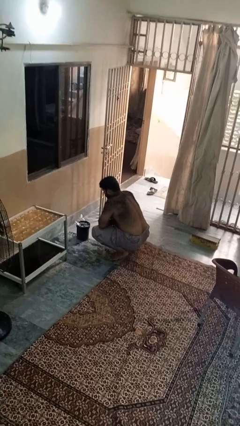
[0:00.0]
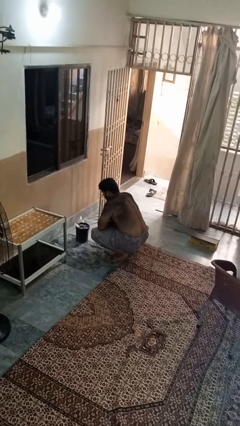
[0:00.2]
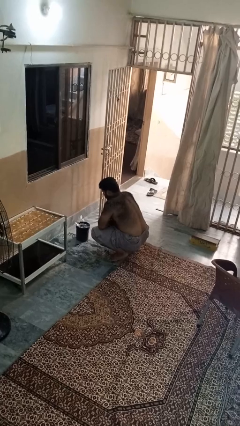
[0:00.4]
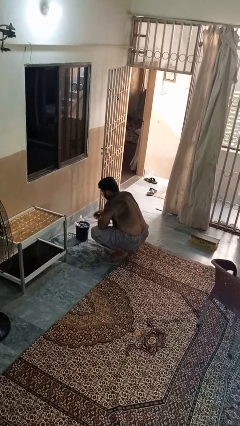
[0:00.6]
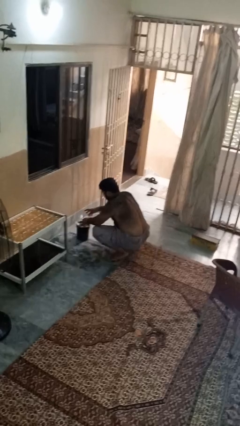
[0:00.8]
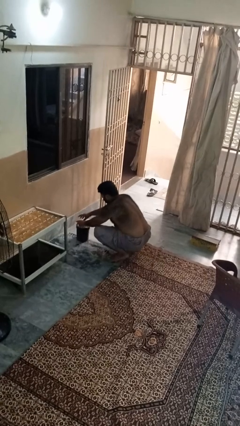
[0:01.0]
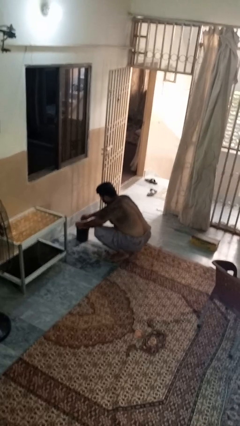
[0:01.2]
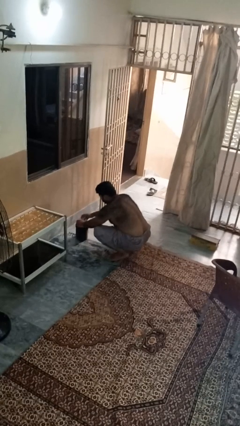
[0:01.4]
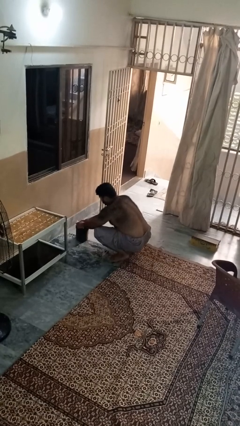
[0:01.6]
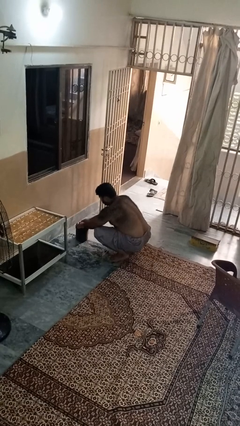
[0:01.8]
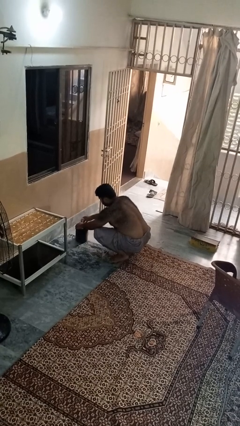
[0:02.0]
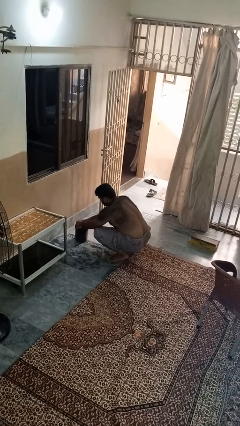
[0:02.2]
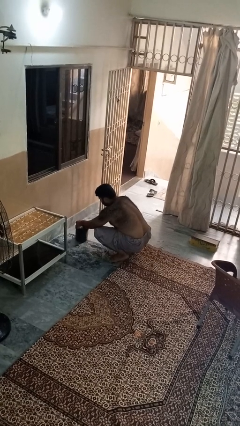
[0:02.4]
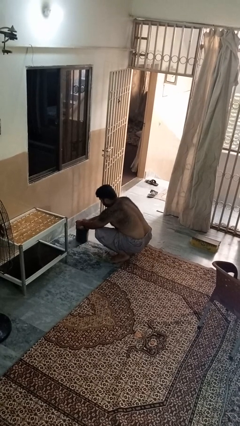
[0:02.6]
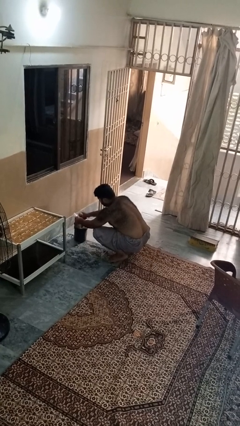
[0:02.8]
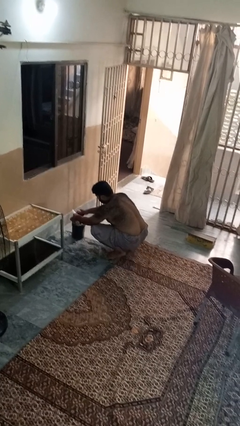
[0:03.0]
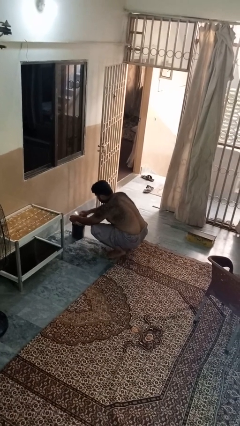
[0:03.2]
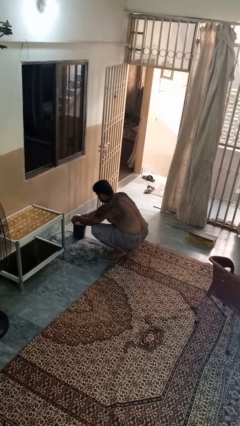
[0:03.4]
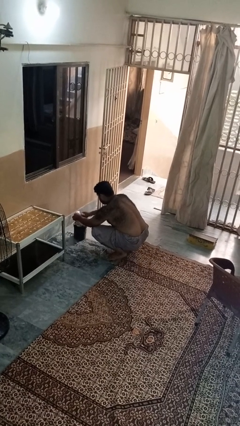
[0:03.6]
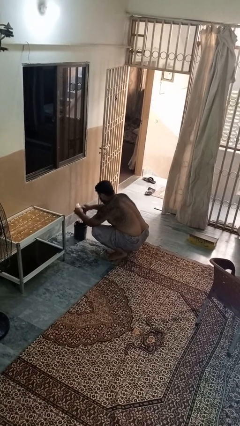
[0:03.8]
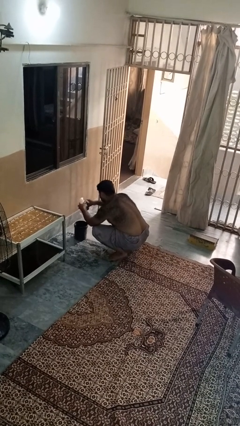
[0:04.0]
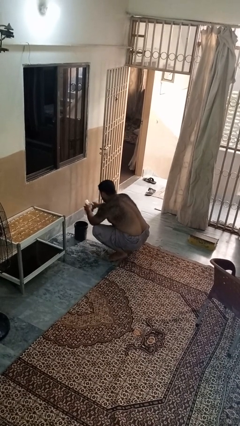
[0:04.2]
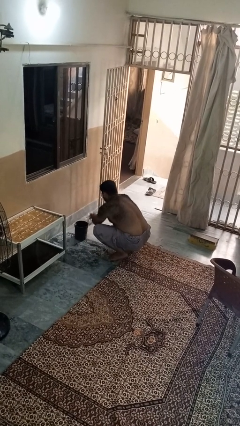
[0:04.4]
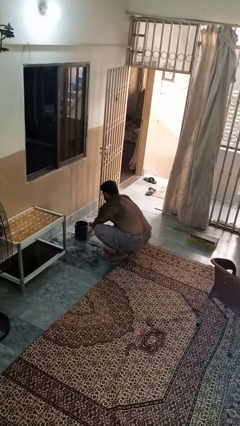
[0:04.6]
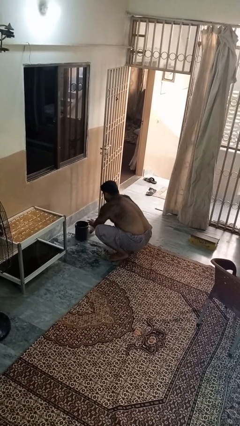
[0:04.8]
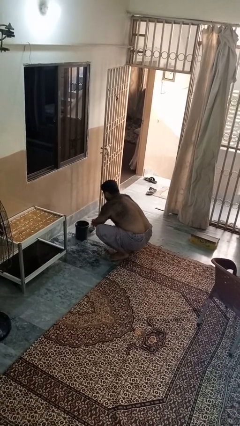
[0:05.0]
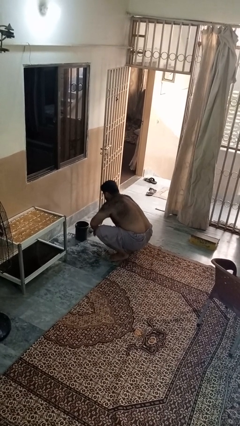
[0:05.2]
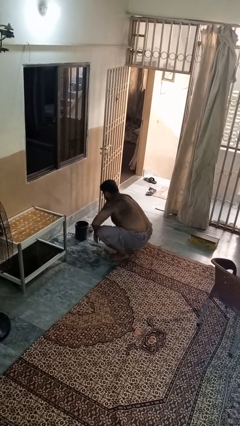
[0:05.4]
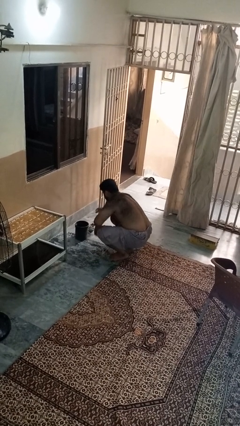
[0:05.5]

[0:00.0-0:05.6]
person removes trashbag from trashcan

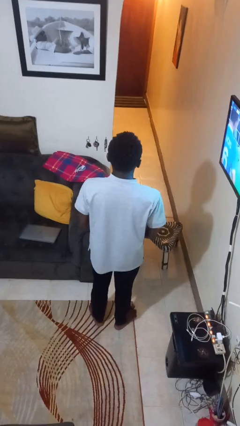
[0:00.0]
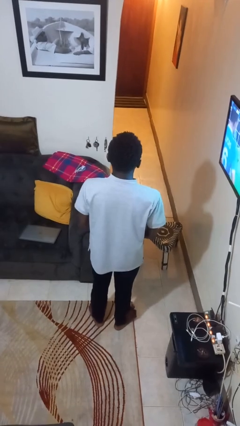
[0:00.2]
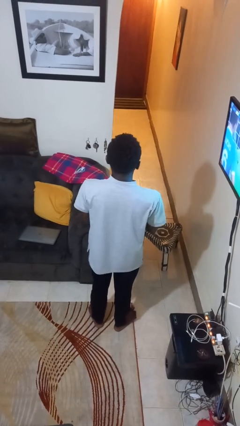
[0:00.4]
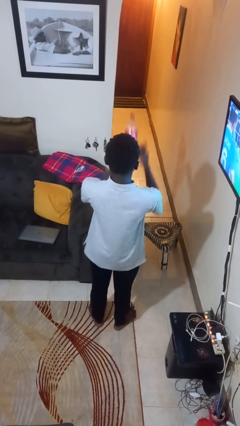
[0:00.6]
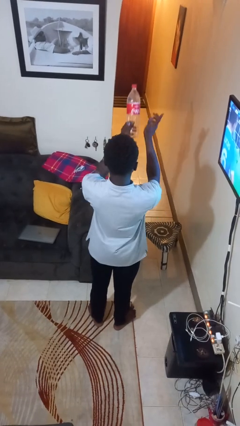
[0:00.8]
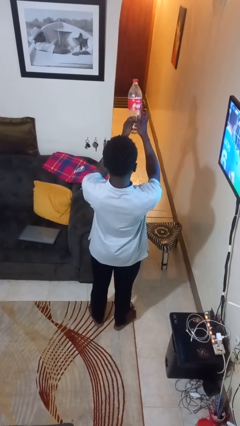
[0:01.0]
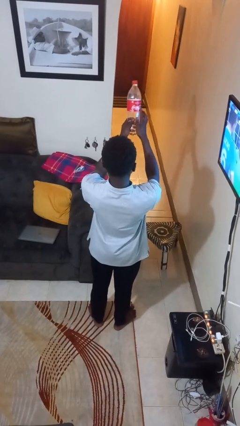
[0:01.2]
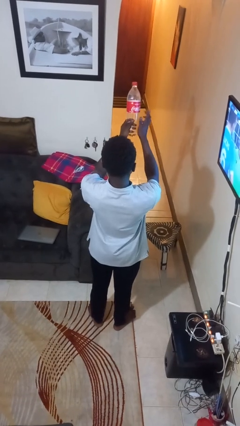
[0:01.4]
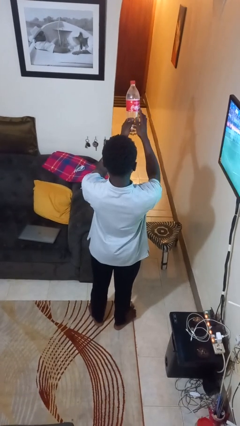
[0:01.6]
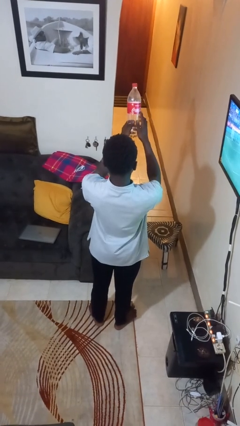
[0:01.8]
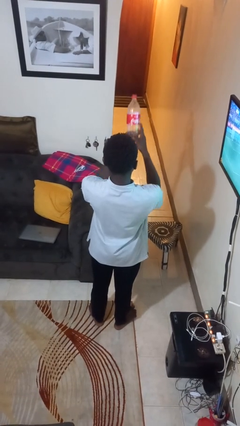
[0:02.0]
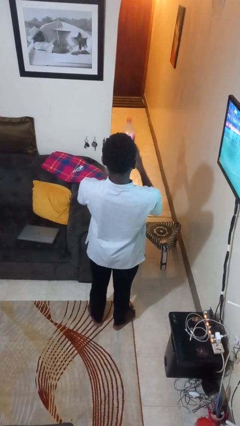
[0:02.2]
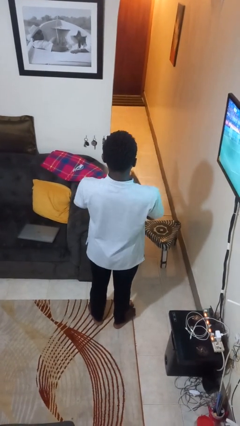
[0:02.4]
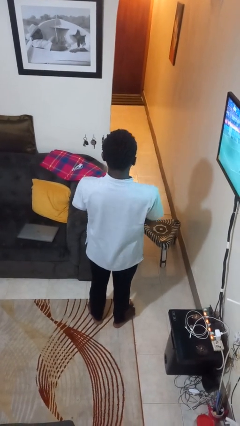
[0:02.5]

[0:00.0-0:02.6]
person taps object with finger

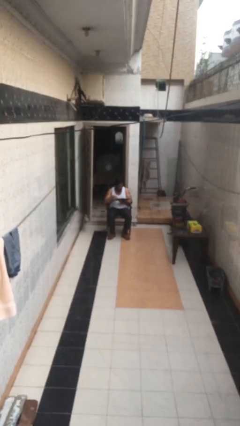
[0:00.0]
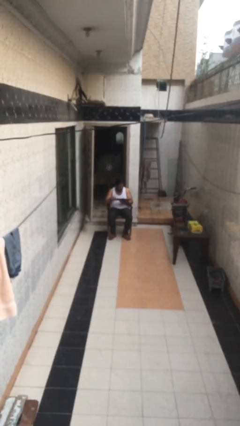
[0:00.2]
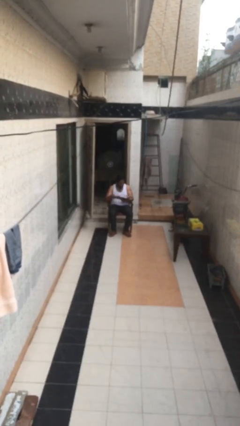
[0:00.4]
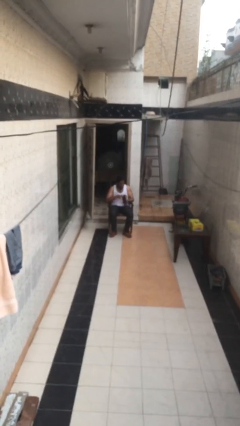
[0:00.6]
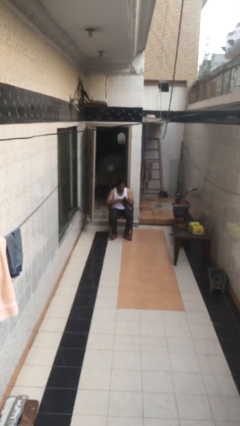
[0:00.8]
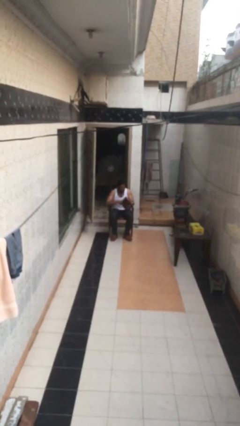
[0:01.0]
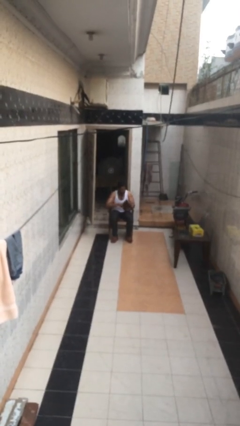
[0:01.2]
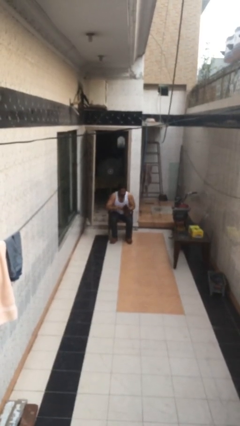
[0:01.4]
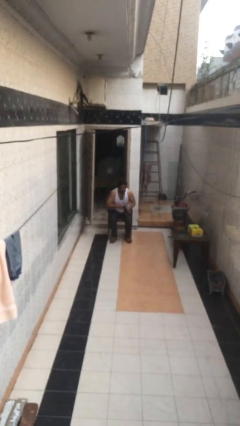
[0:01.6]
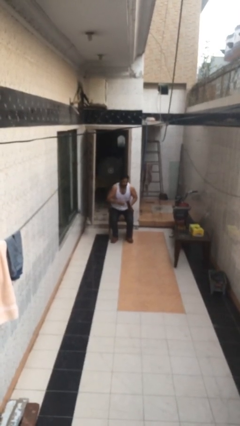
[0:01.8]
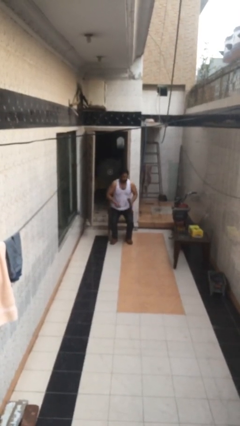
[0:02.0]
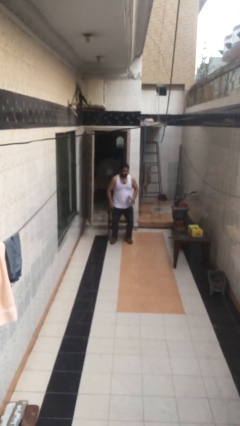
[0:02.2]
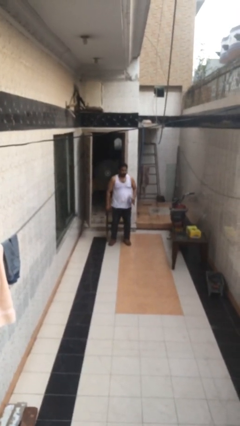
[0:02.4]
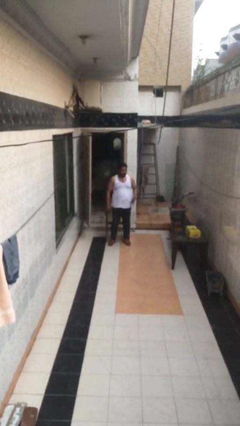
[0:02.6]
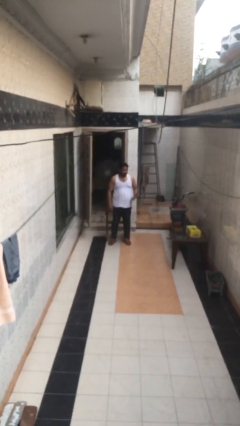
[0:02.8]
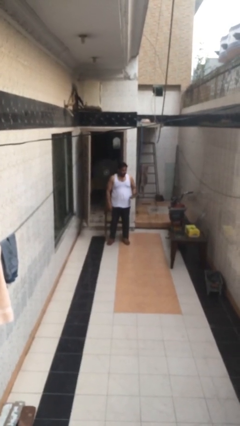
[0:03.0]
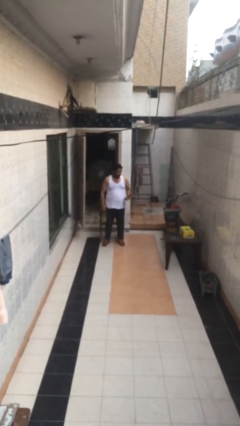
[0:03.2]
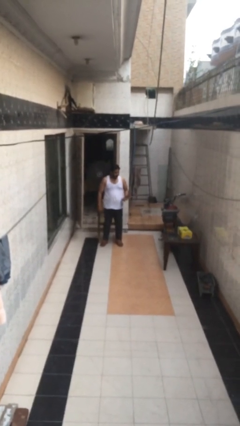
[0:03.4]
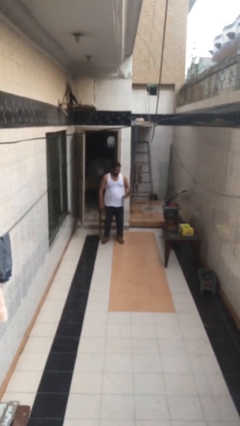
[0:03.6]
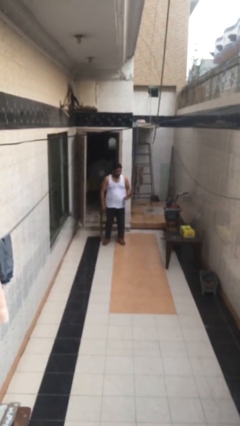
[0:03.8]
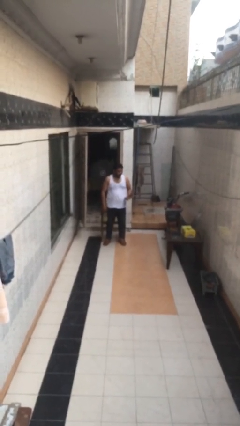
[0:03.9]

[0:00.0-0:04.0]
person stands up

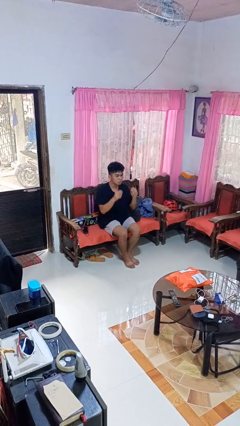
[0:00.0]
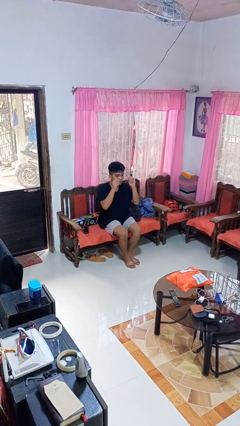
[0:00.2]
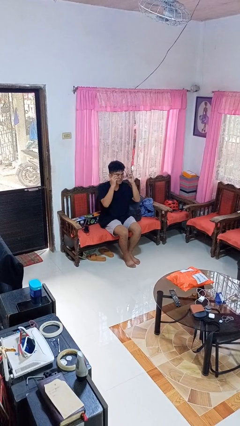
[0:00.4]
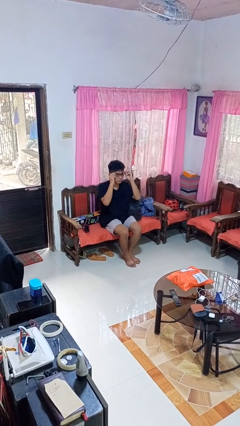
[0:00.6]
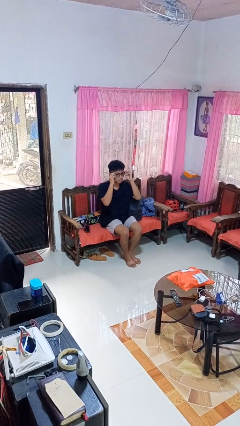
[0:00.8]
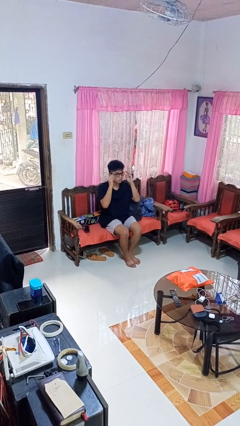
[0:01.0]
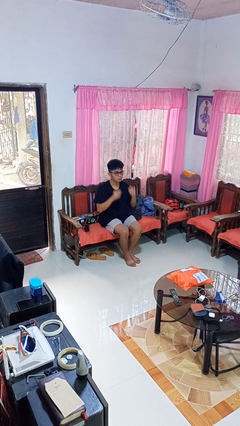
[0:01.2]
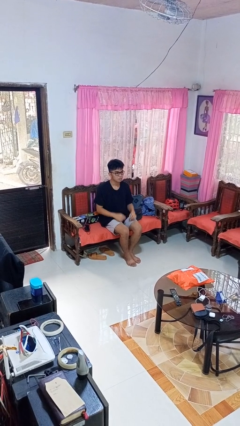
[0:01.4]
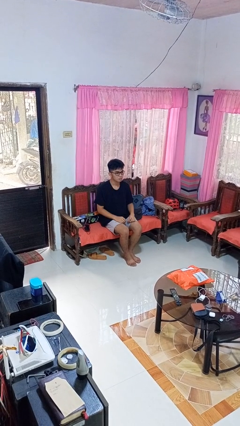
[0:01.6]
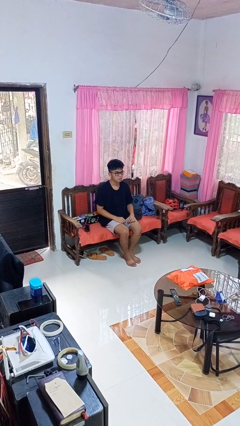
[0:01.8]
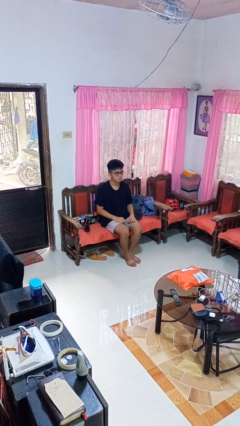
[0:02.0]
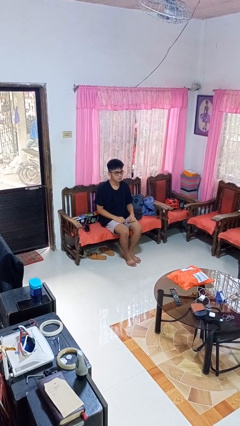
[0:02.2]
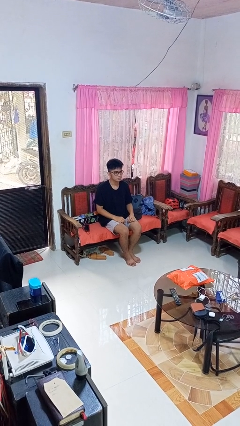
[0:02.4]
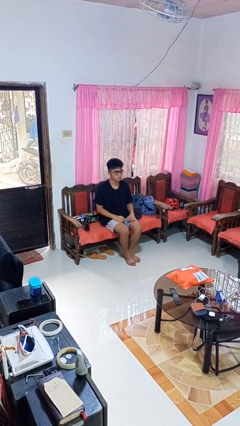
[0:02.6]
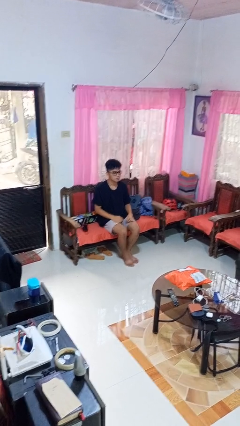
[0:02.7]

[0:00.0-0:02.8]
person puts on glasses

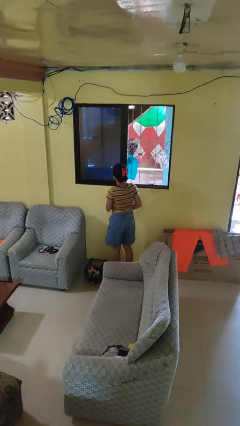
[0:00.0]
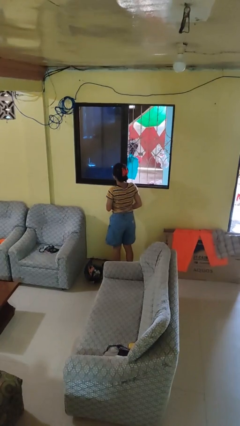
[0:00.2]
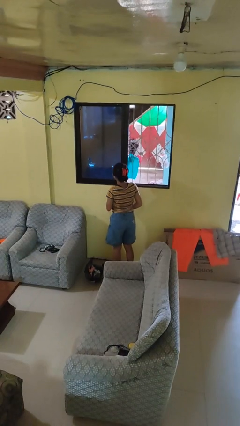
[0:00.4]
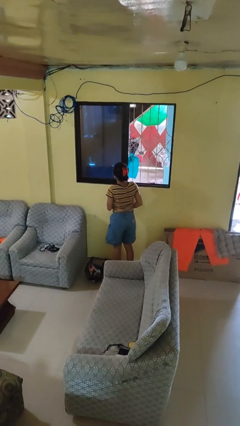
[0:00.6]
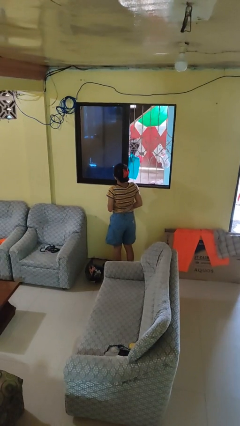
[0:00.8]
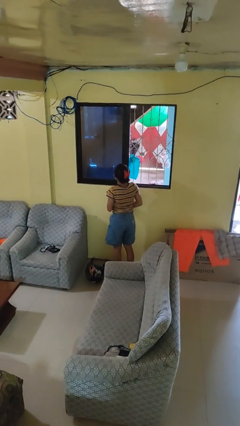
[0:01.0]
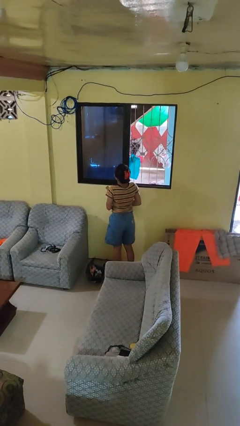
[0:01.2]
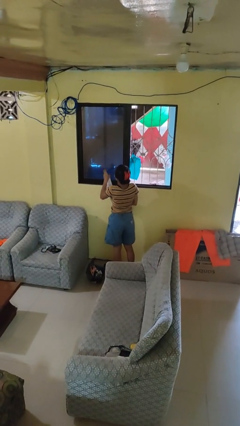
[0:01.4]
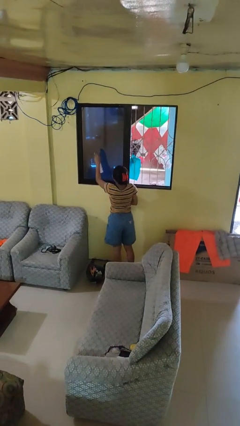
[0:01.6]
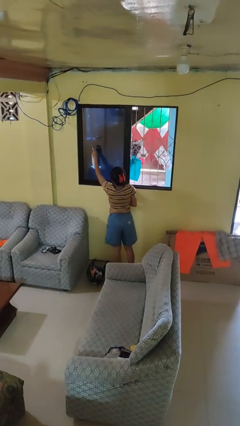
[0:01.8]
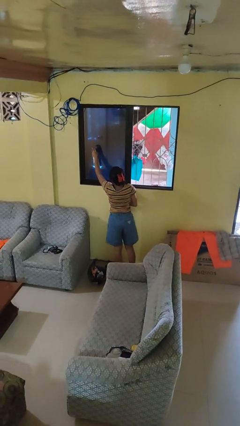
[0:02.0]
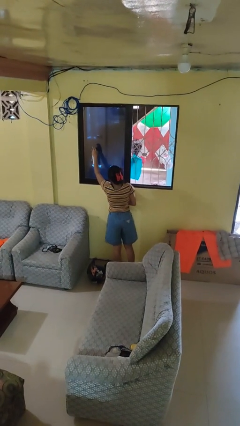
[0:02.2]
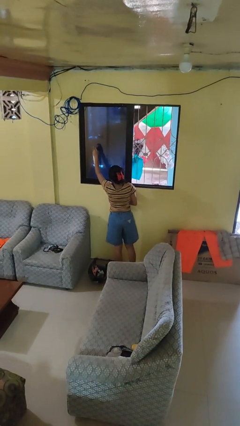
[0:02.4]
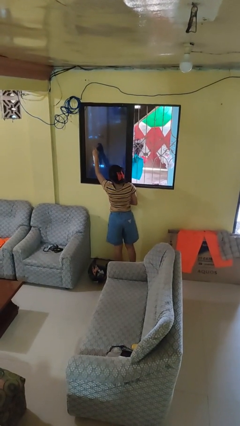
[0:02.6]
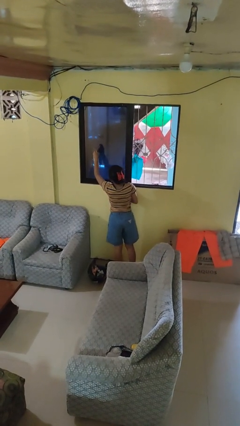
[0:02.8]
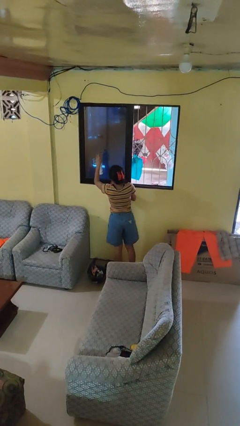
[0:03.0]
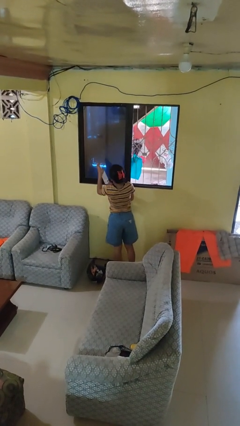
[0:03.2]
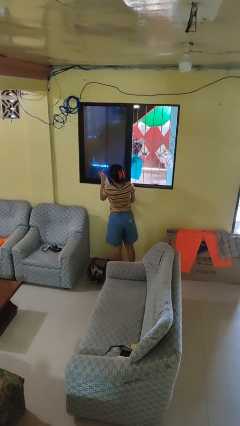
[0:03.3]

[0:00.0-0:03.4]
person sprays from bottle
